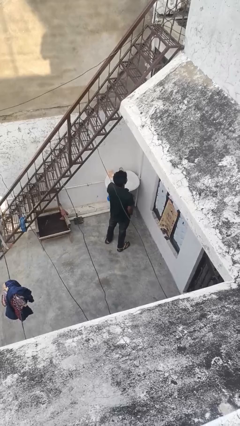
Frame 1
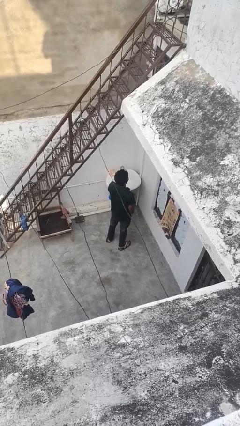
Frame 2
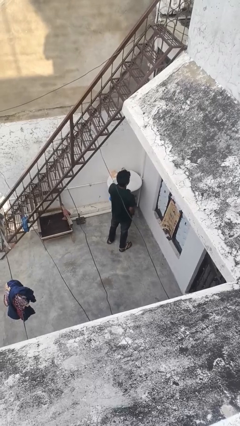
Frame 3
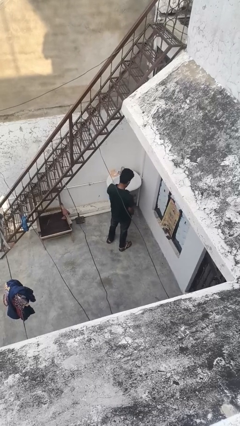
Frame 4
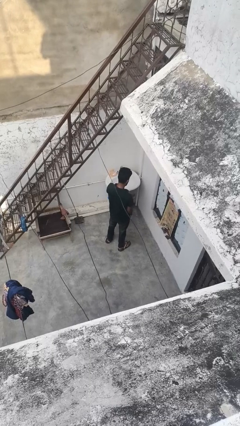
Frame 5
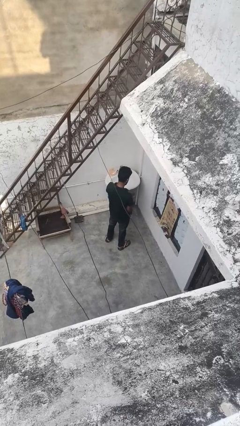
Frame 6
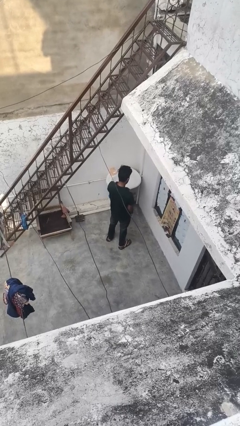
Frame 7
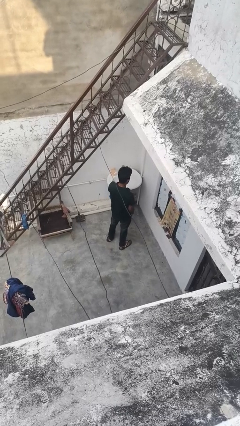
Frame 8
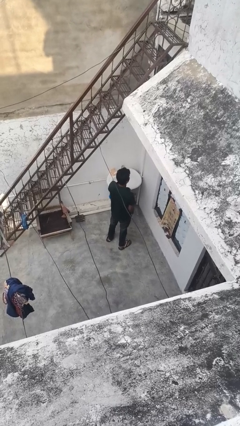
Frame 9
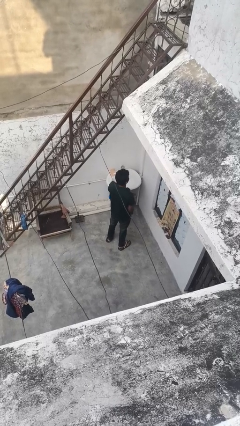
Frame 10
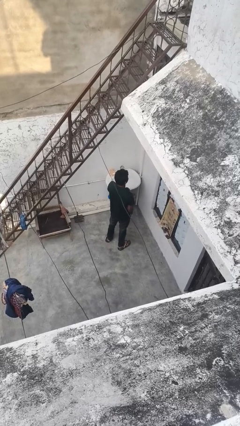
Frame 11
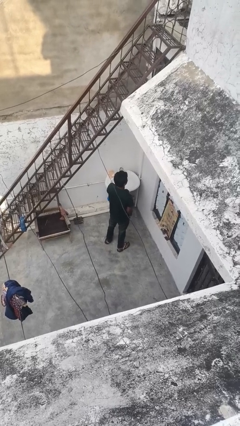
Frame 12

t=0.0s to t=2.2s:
person strokes chin

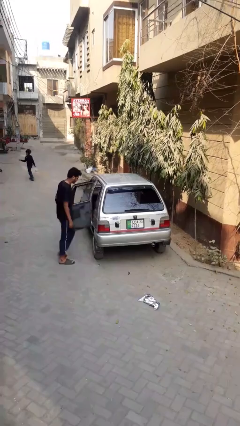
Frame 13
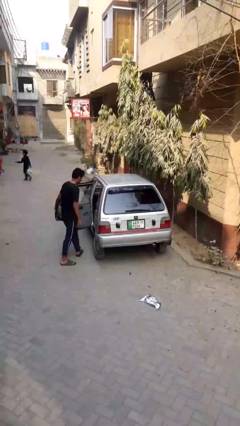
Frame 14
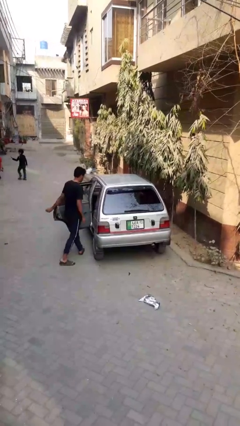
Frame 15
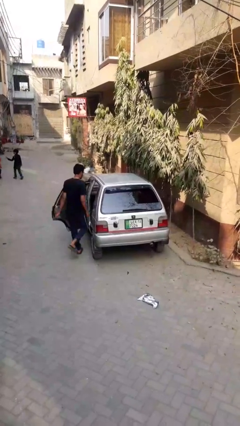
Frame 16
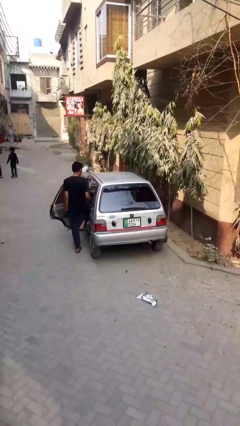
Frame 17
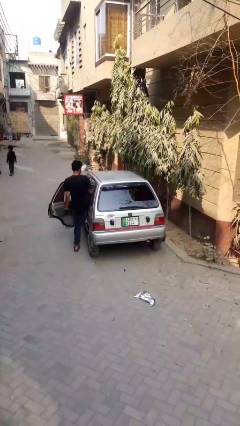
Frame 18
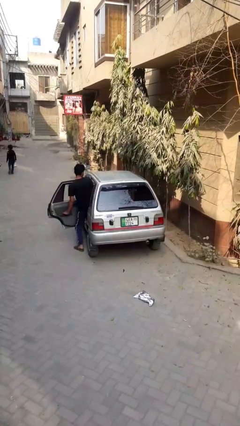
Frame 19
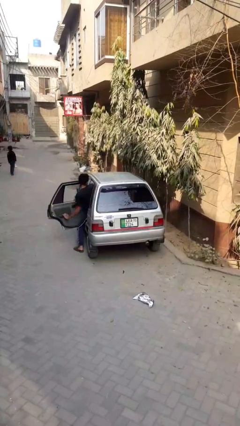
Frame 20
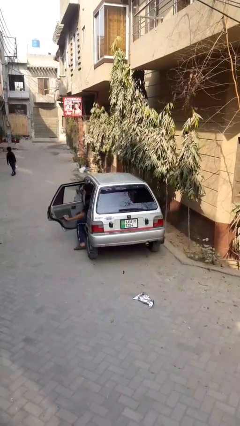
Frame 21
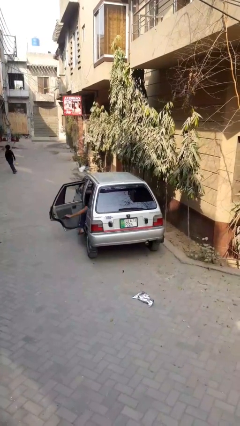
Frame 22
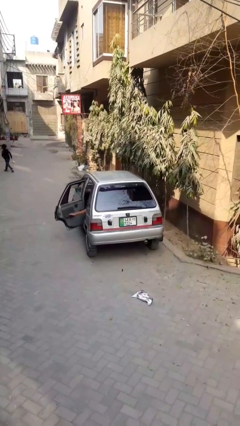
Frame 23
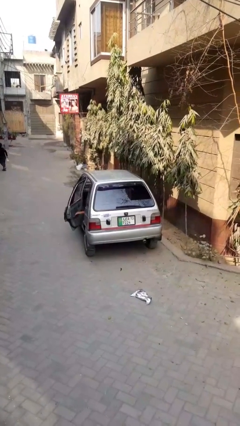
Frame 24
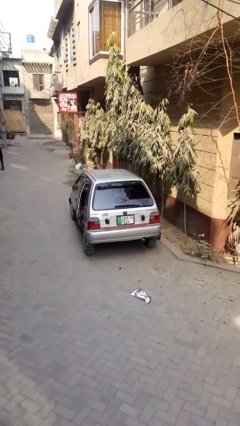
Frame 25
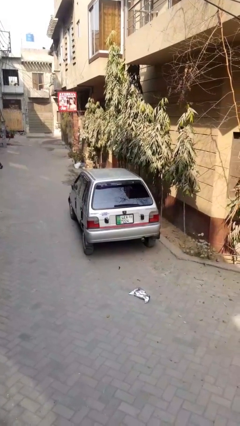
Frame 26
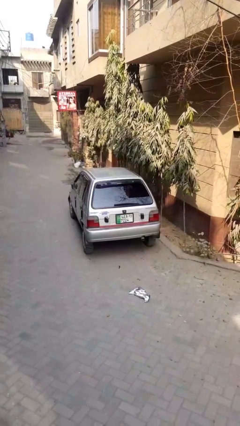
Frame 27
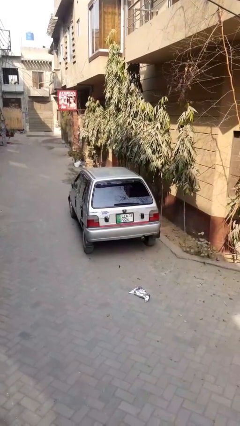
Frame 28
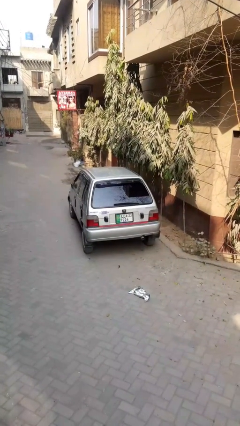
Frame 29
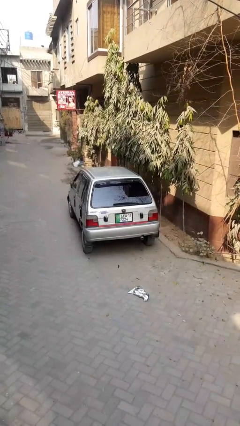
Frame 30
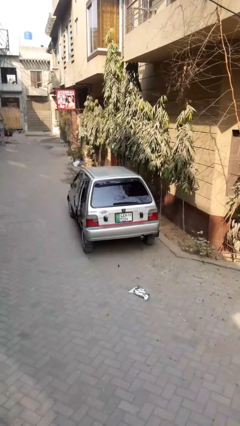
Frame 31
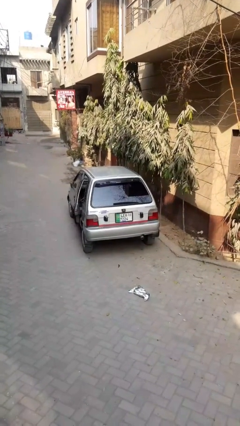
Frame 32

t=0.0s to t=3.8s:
car picks up person

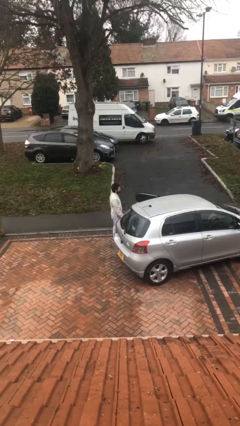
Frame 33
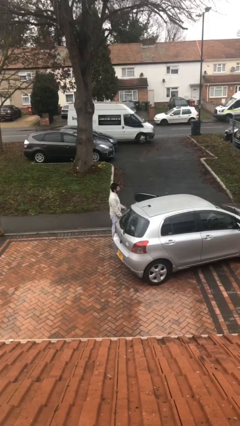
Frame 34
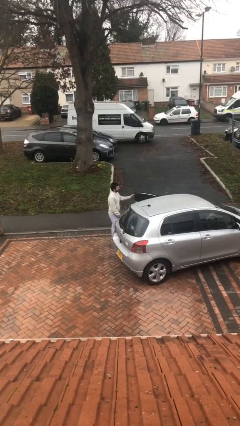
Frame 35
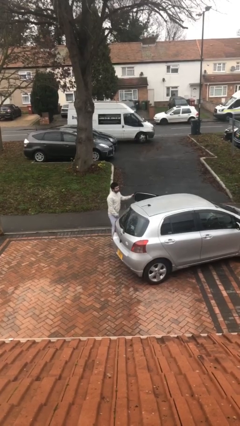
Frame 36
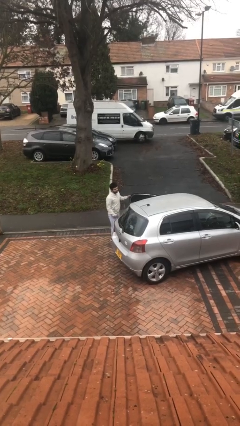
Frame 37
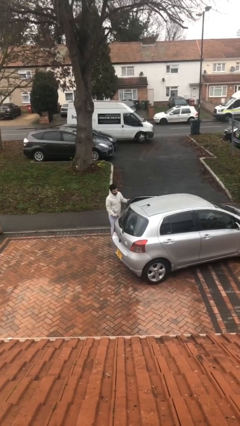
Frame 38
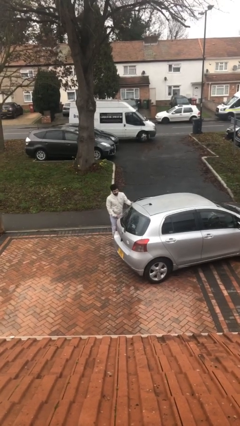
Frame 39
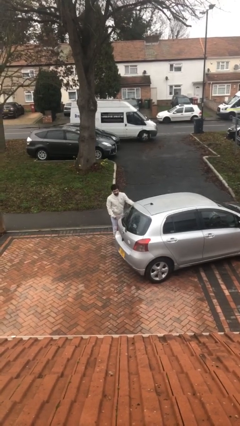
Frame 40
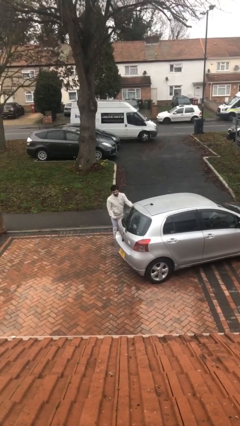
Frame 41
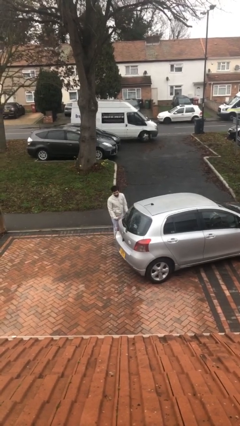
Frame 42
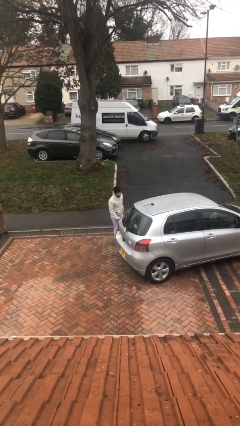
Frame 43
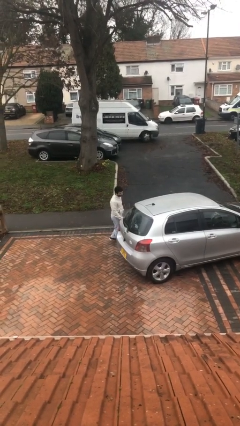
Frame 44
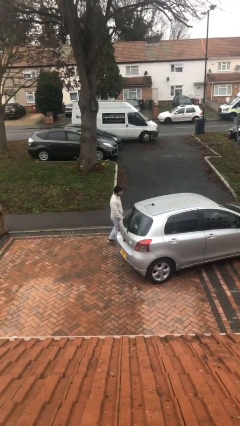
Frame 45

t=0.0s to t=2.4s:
person closes car door

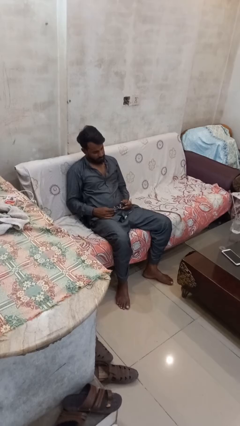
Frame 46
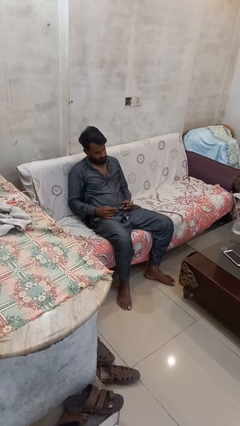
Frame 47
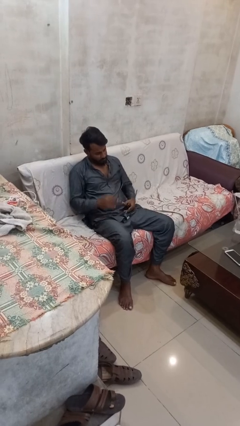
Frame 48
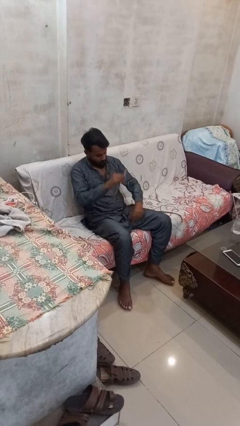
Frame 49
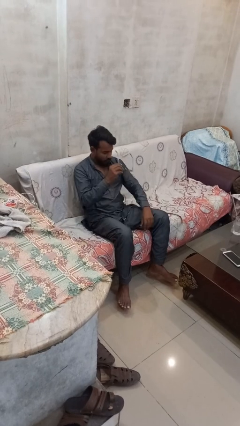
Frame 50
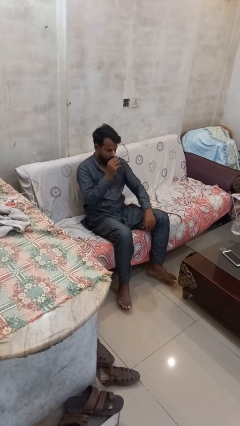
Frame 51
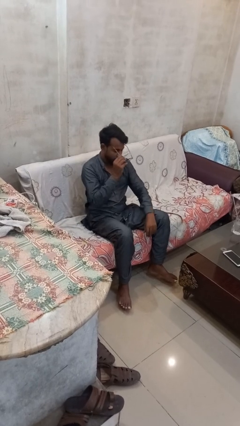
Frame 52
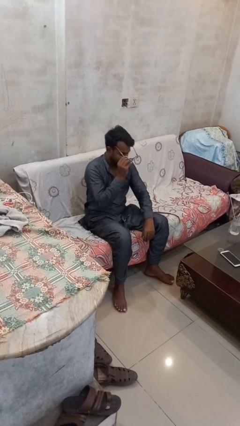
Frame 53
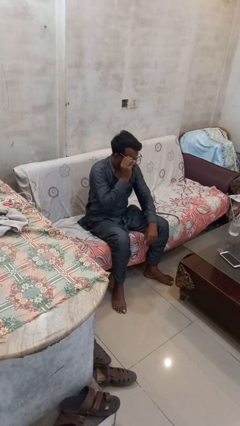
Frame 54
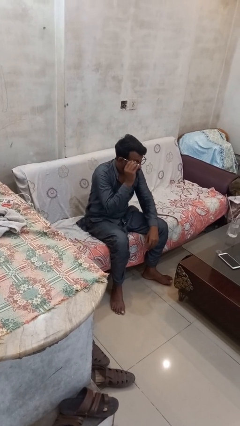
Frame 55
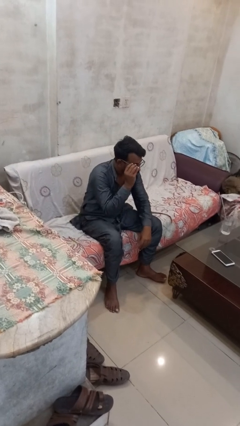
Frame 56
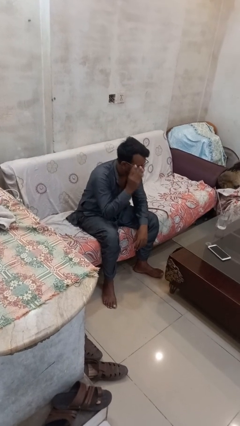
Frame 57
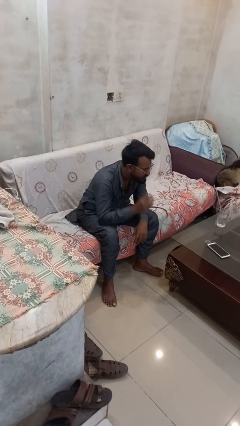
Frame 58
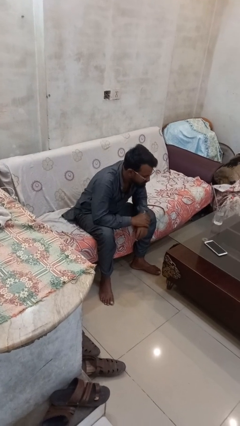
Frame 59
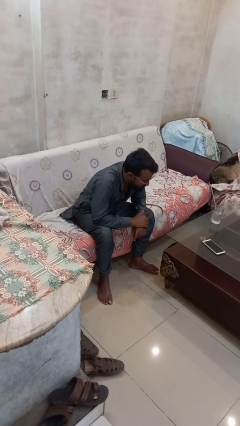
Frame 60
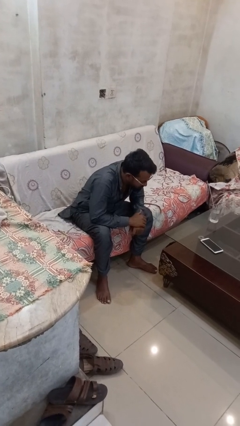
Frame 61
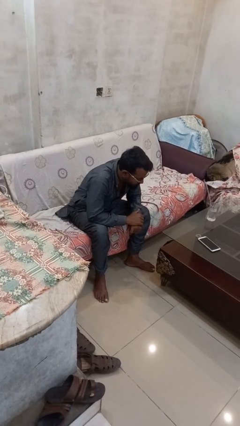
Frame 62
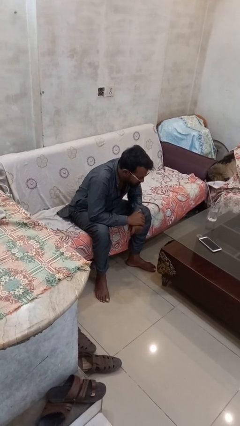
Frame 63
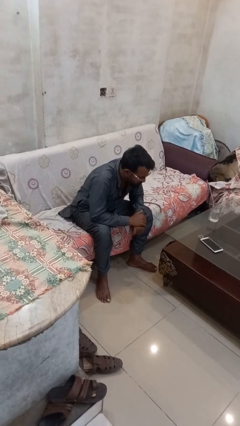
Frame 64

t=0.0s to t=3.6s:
person puts on glasses

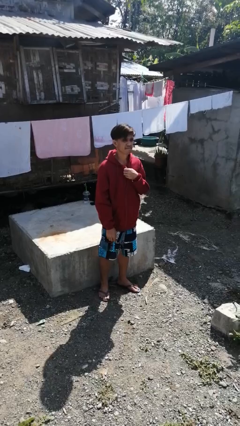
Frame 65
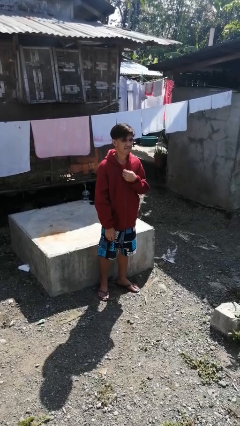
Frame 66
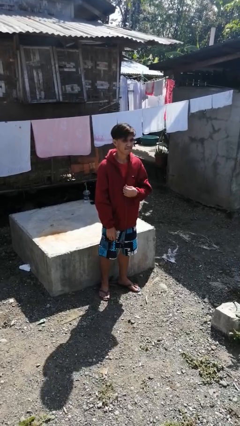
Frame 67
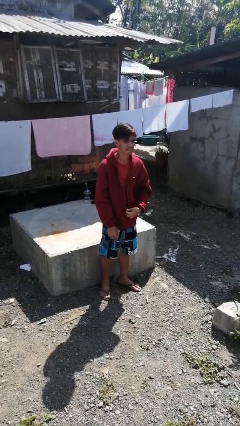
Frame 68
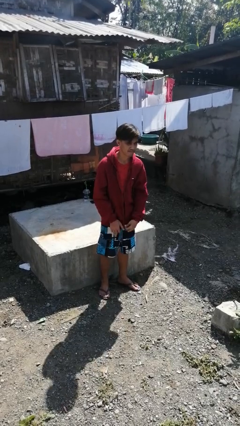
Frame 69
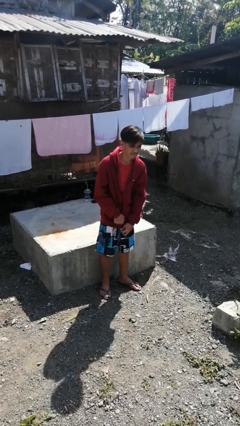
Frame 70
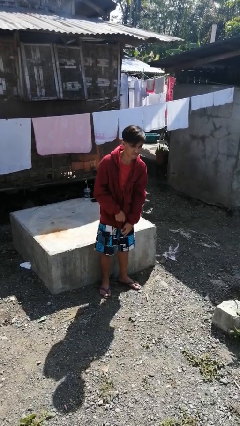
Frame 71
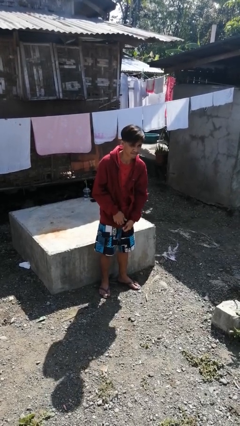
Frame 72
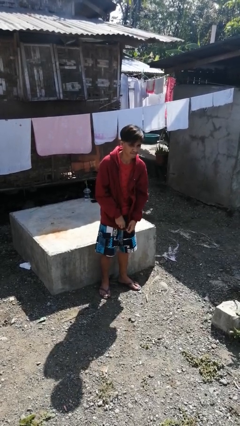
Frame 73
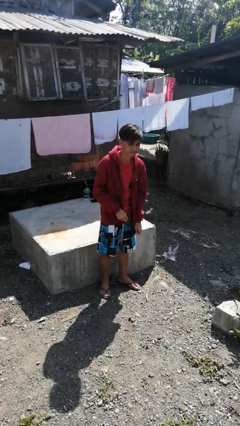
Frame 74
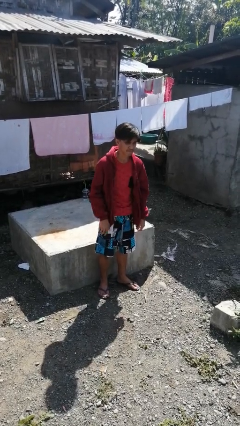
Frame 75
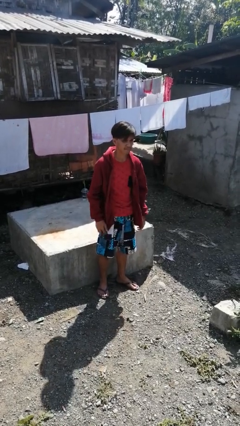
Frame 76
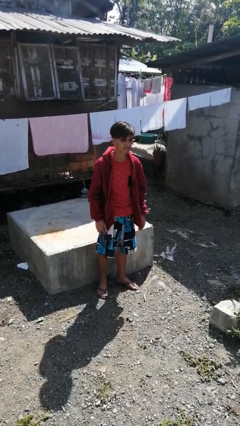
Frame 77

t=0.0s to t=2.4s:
person unzips jacket

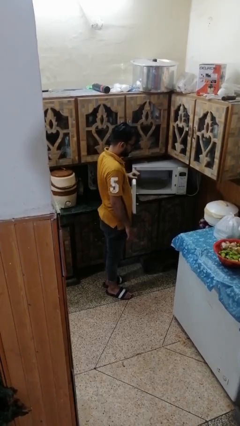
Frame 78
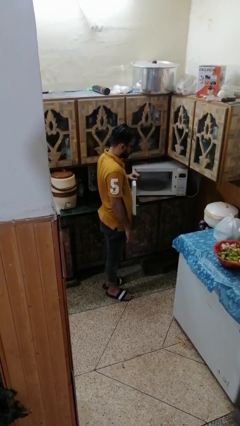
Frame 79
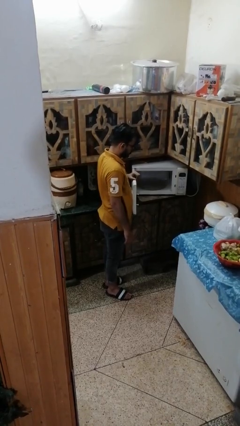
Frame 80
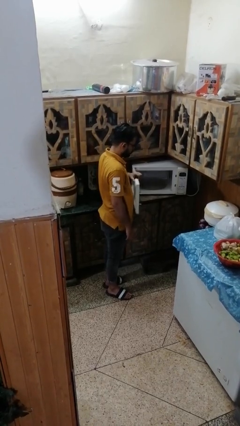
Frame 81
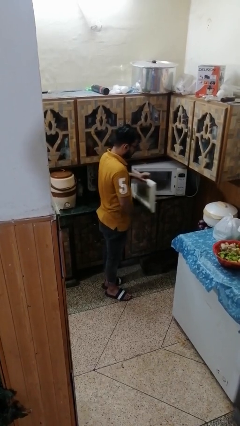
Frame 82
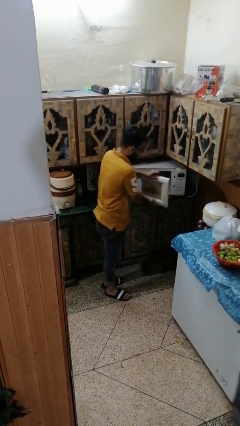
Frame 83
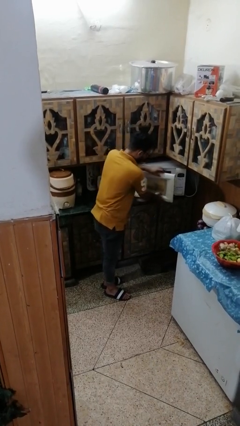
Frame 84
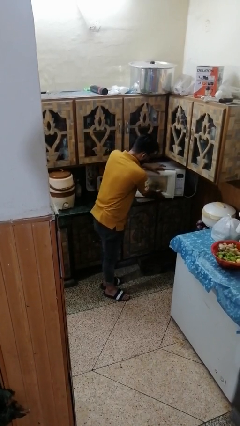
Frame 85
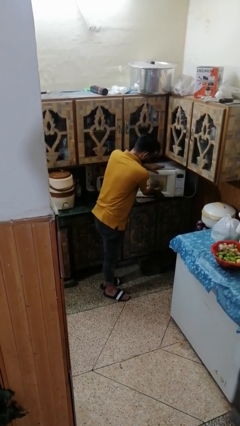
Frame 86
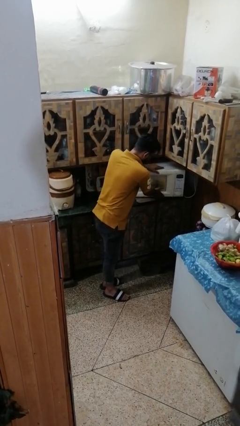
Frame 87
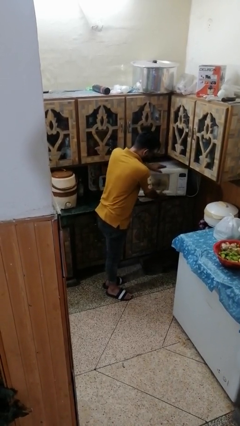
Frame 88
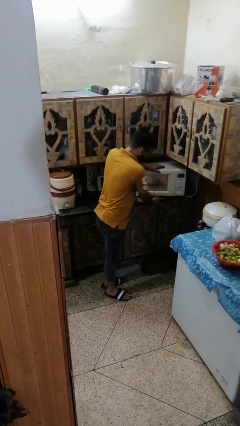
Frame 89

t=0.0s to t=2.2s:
person closes microwave

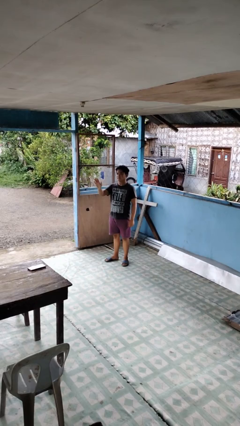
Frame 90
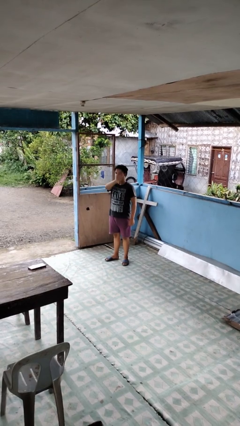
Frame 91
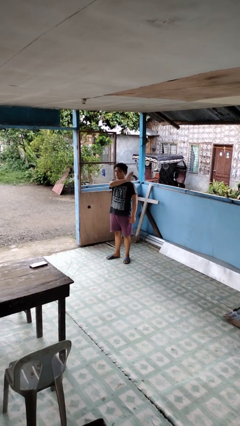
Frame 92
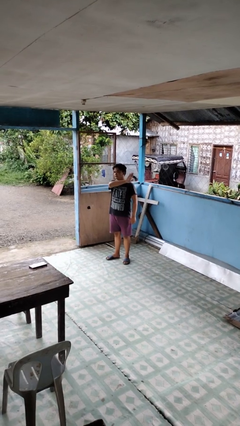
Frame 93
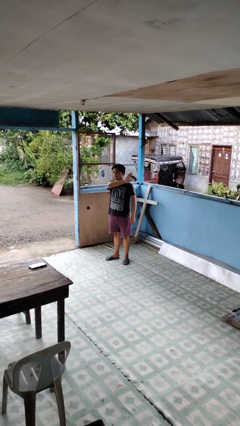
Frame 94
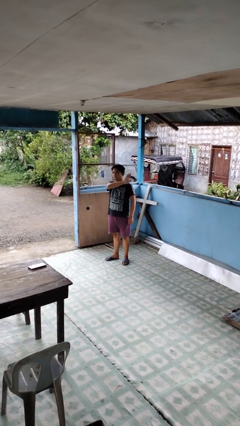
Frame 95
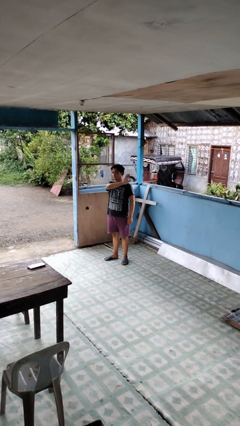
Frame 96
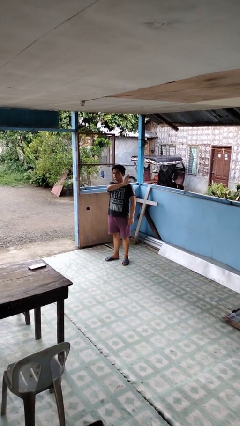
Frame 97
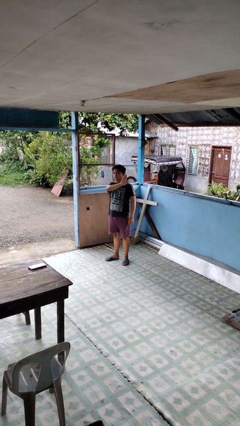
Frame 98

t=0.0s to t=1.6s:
person gestures swipe left
